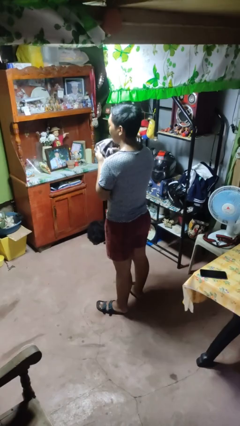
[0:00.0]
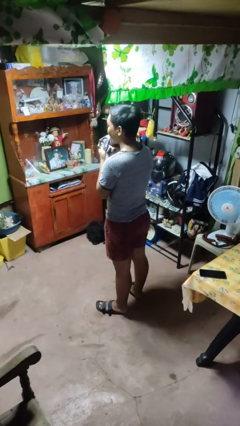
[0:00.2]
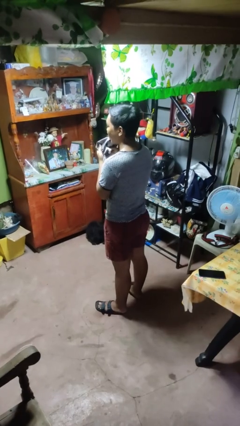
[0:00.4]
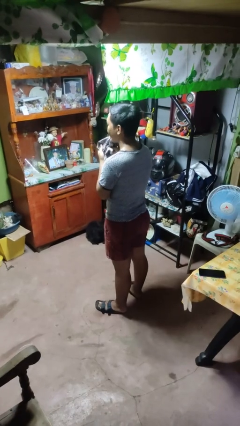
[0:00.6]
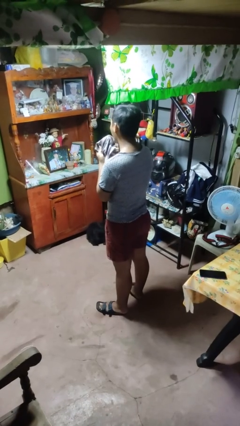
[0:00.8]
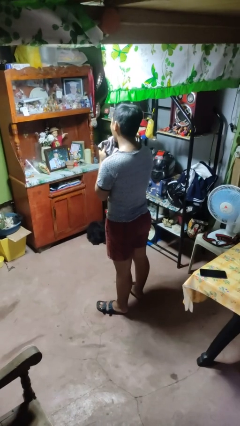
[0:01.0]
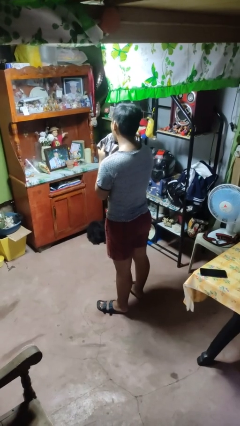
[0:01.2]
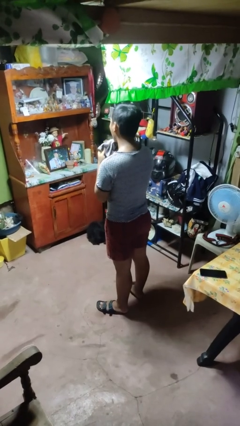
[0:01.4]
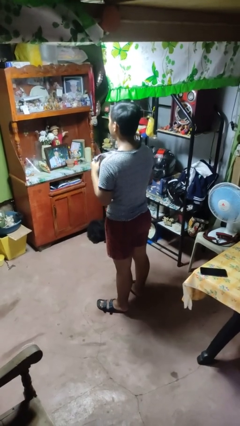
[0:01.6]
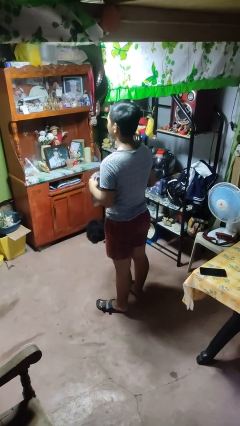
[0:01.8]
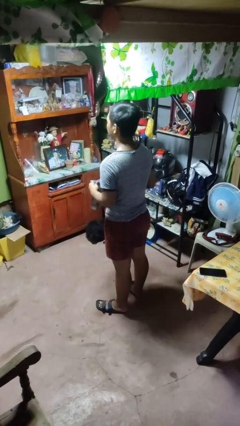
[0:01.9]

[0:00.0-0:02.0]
person wipes mouth with napkin

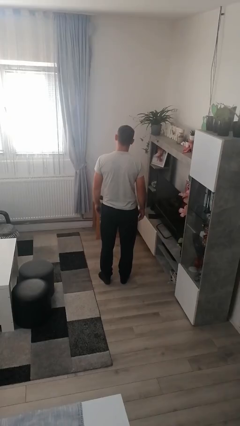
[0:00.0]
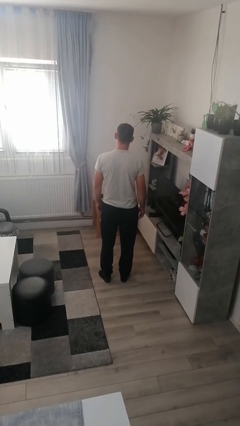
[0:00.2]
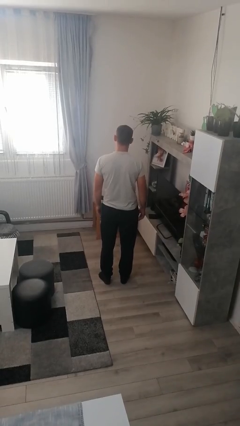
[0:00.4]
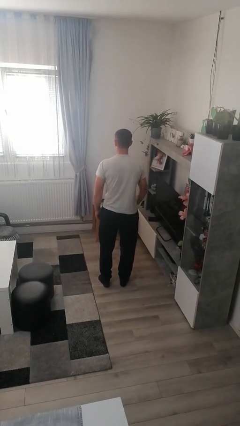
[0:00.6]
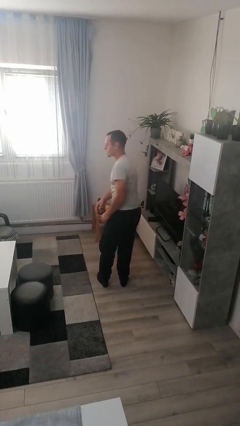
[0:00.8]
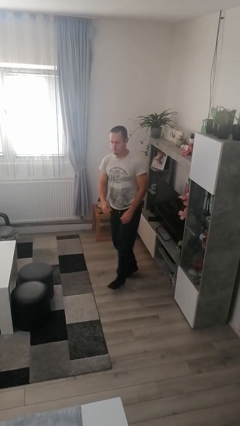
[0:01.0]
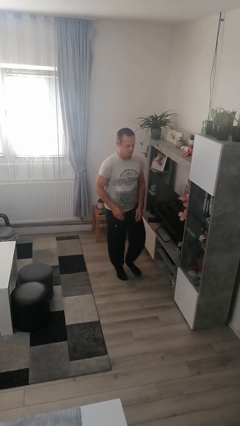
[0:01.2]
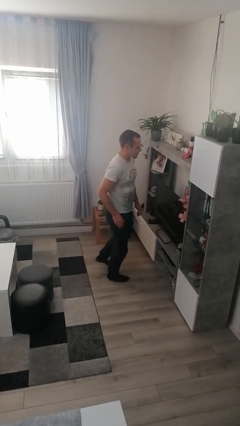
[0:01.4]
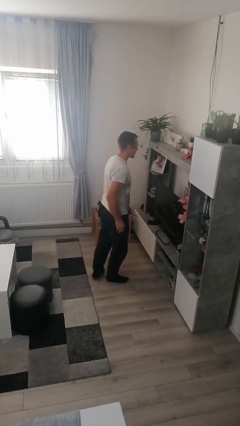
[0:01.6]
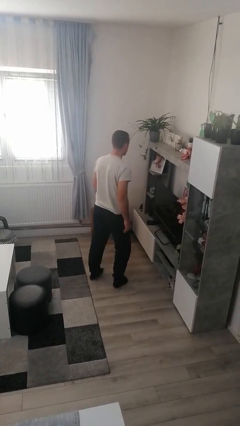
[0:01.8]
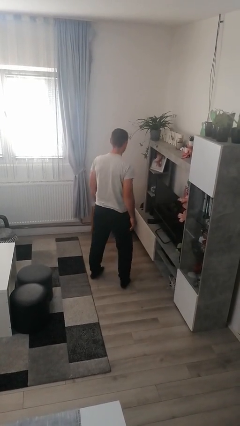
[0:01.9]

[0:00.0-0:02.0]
person twirls

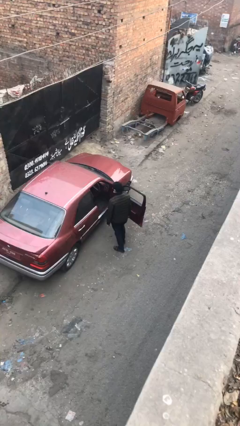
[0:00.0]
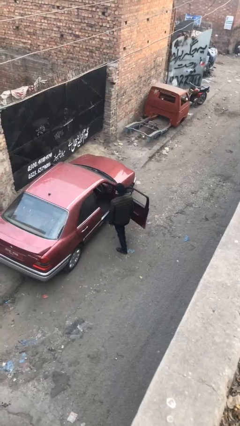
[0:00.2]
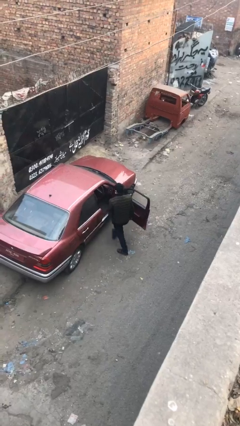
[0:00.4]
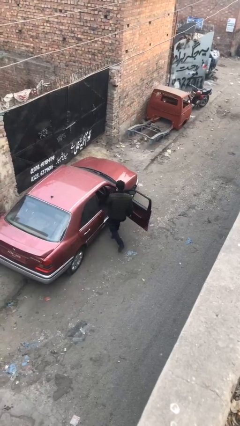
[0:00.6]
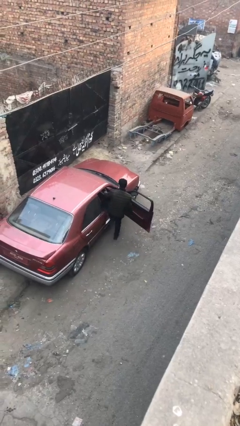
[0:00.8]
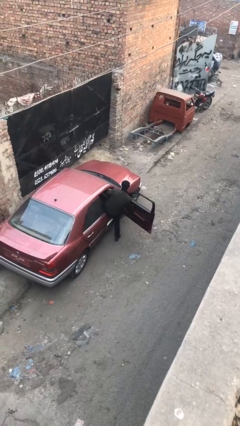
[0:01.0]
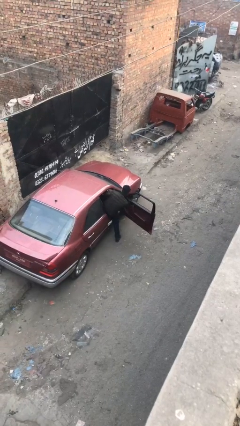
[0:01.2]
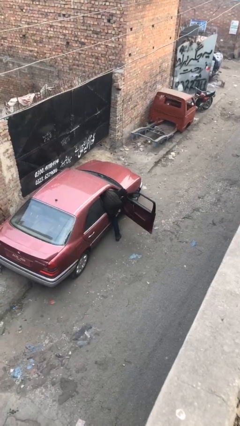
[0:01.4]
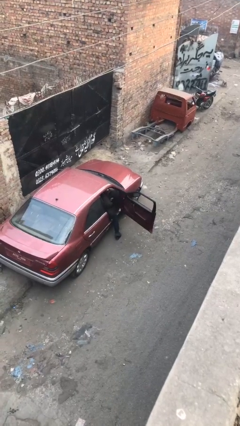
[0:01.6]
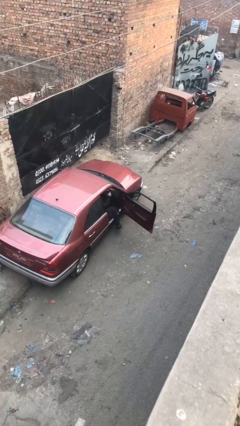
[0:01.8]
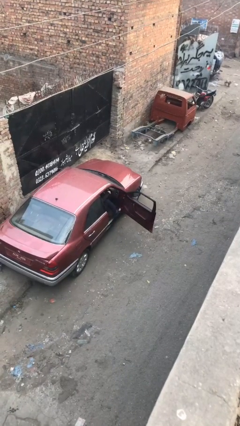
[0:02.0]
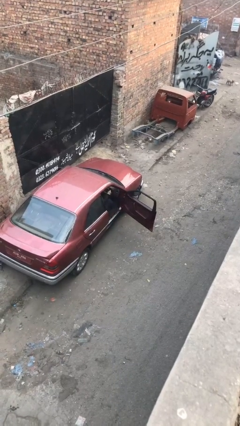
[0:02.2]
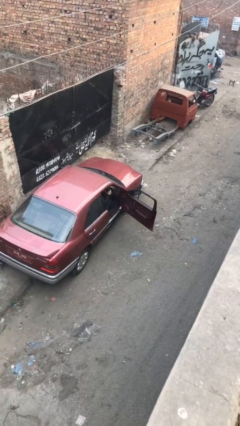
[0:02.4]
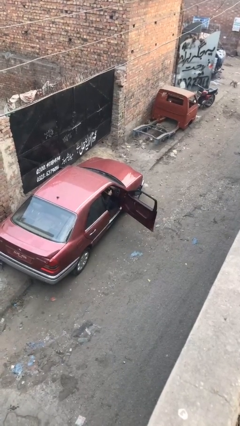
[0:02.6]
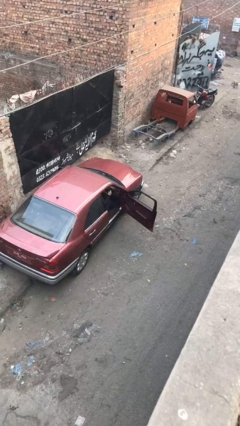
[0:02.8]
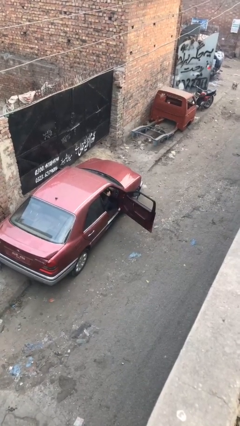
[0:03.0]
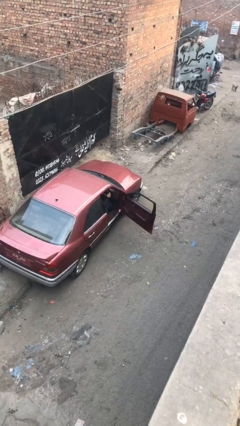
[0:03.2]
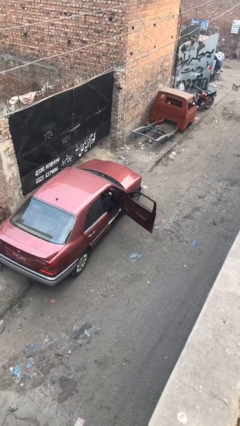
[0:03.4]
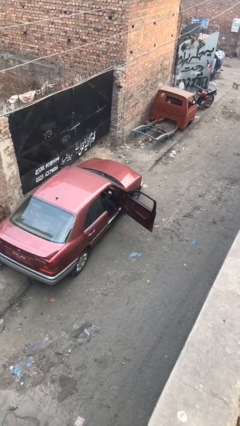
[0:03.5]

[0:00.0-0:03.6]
person enters car

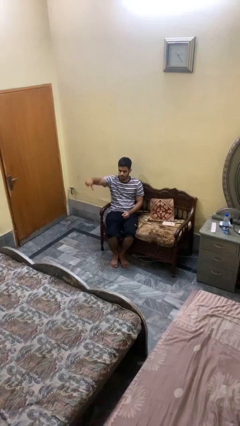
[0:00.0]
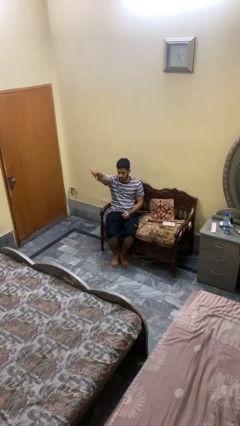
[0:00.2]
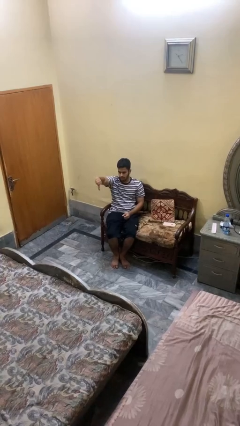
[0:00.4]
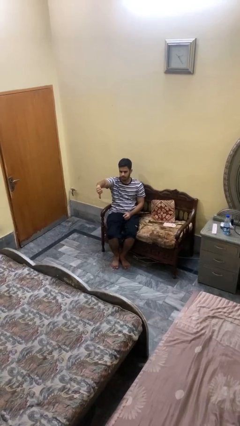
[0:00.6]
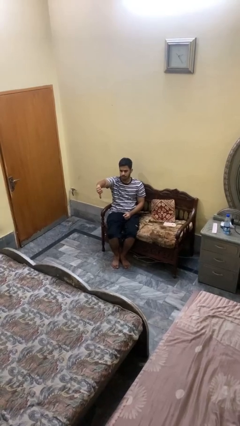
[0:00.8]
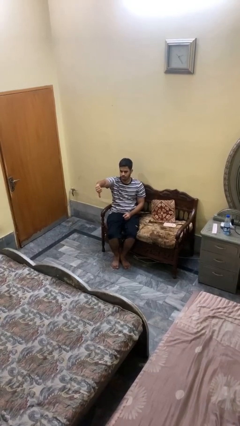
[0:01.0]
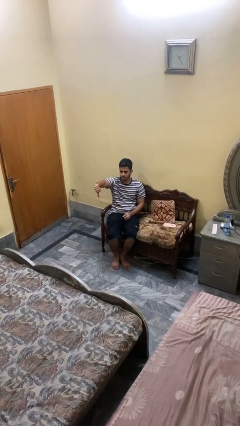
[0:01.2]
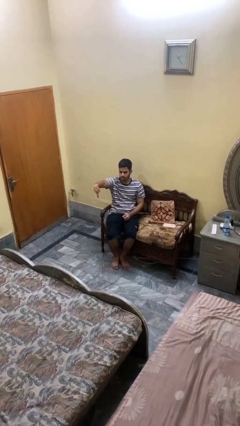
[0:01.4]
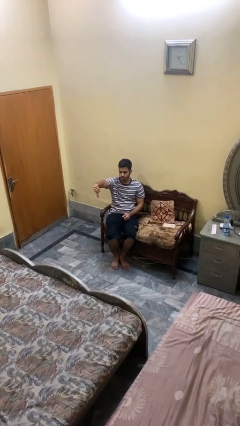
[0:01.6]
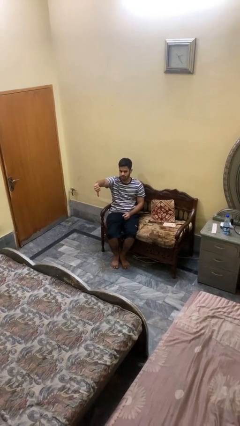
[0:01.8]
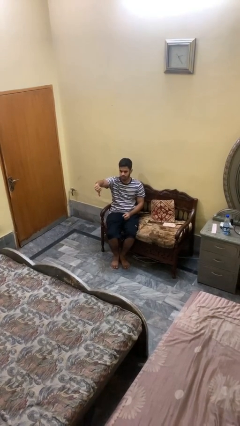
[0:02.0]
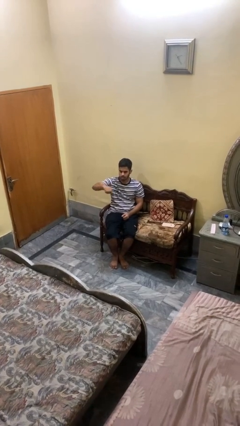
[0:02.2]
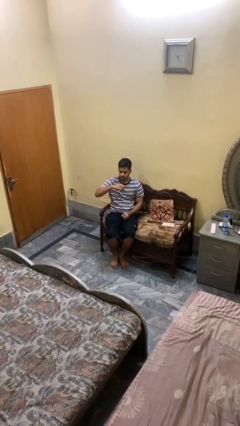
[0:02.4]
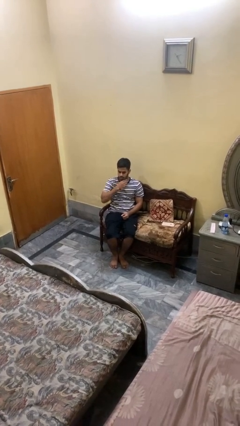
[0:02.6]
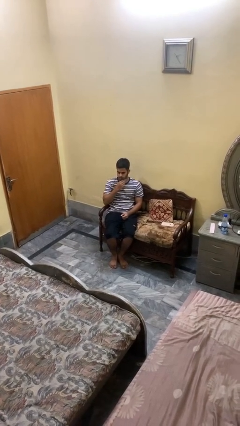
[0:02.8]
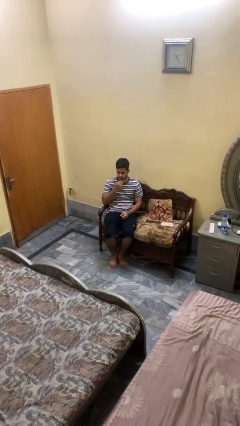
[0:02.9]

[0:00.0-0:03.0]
person gestures thumbs down

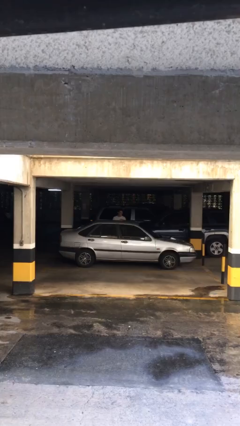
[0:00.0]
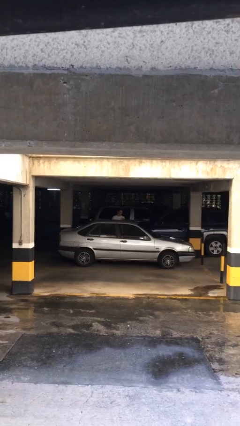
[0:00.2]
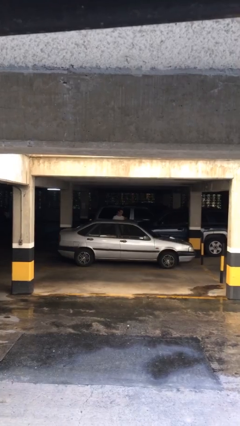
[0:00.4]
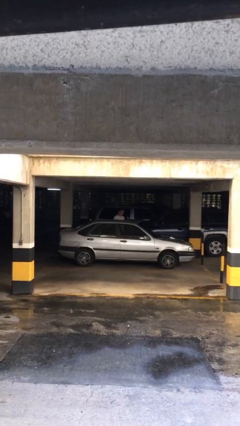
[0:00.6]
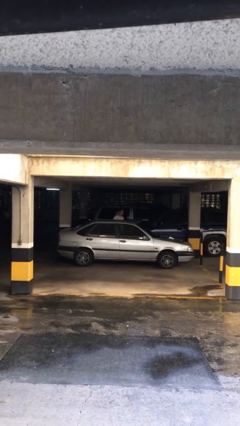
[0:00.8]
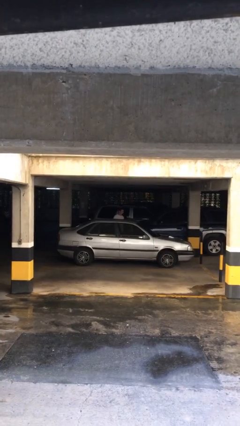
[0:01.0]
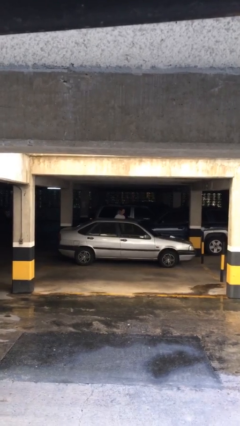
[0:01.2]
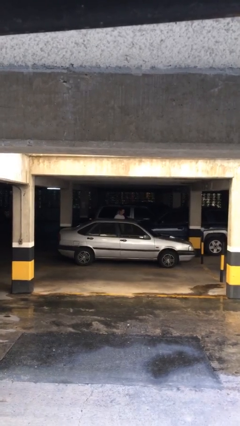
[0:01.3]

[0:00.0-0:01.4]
person opens car door

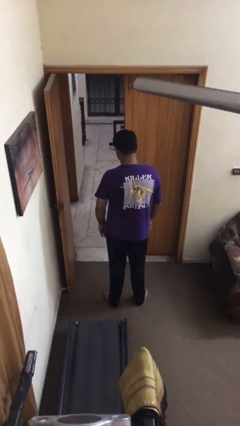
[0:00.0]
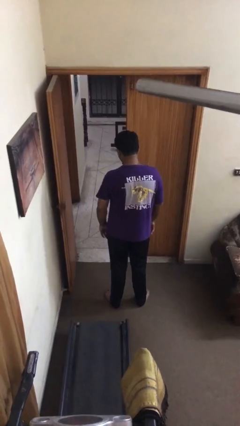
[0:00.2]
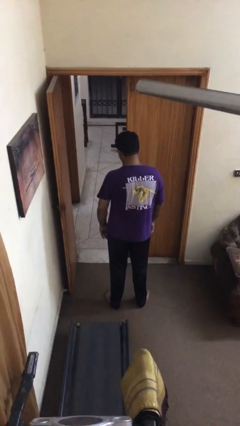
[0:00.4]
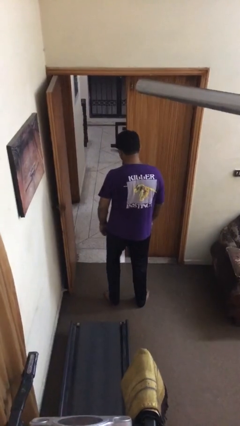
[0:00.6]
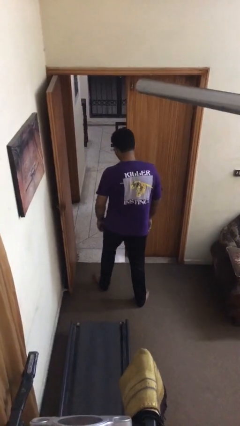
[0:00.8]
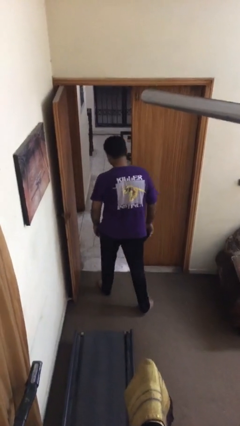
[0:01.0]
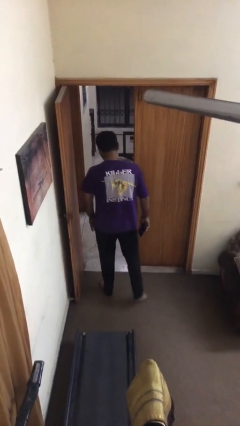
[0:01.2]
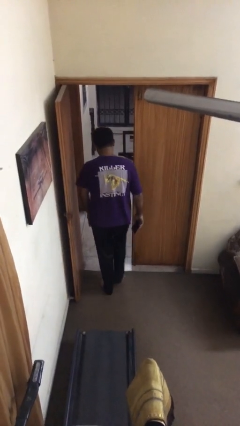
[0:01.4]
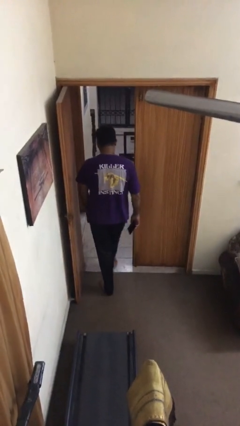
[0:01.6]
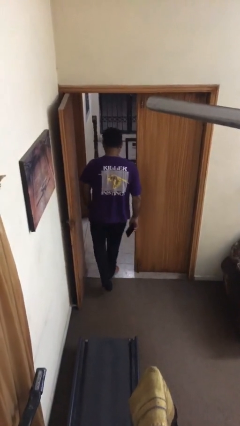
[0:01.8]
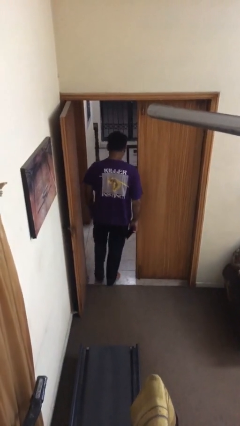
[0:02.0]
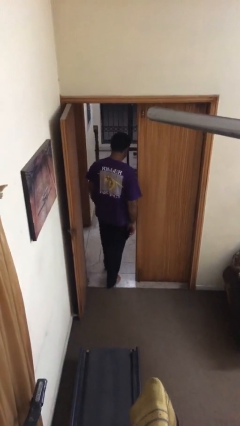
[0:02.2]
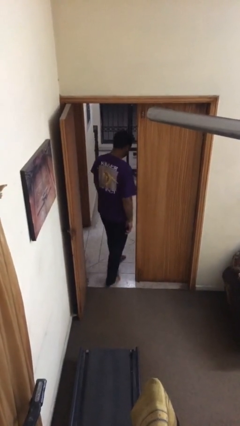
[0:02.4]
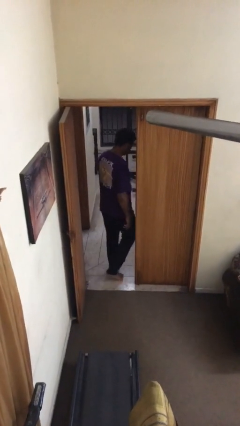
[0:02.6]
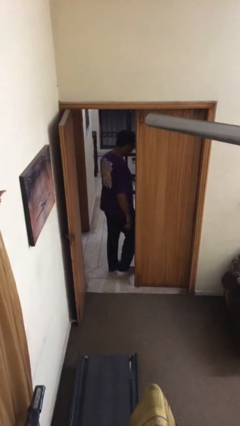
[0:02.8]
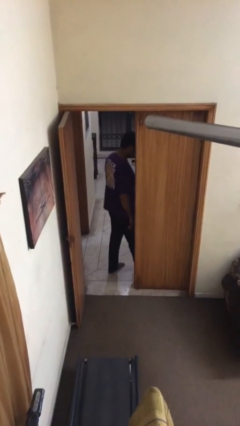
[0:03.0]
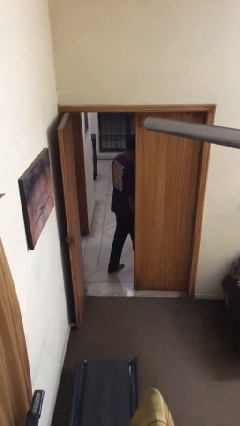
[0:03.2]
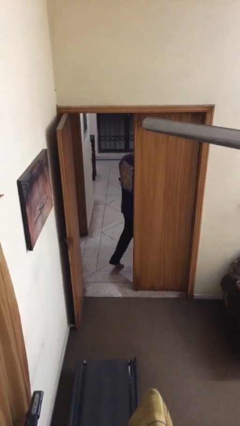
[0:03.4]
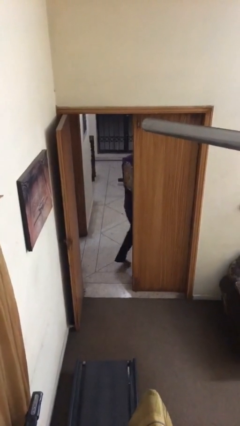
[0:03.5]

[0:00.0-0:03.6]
person exits scene through structure

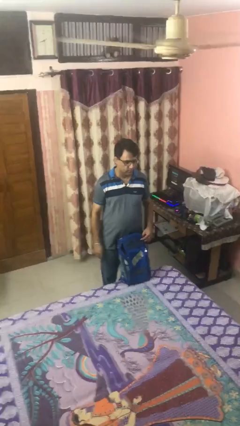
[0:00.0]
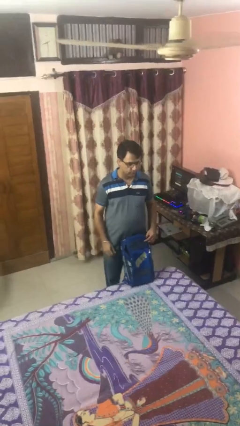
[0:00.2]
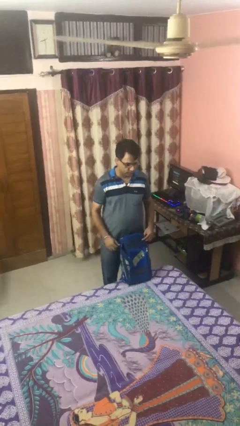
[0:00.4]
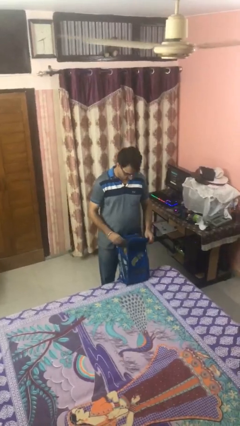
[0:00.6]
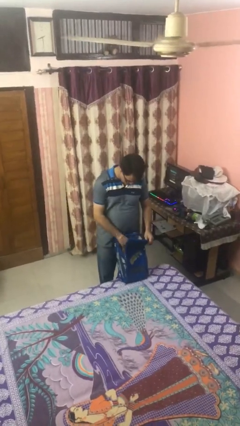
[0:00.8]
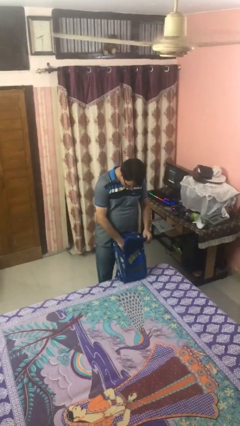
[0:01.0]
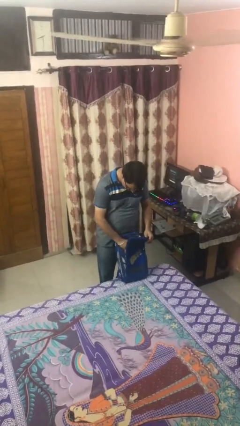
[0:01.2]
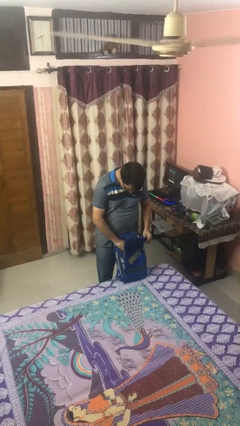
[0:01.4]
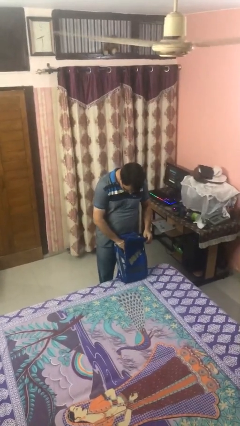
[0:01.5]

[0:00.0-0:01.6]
person searches in backpack
